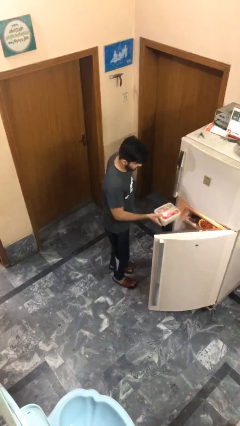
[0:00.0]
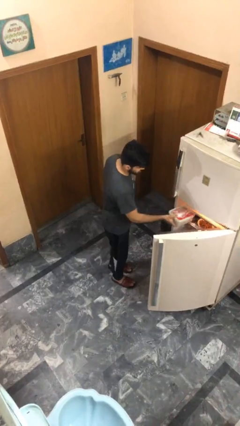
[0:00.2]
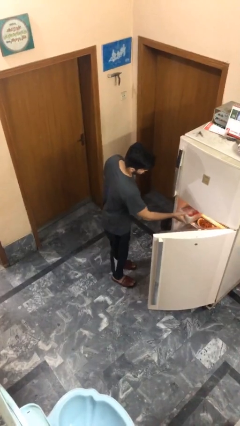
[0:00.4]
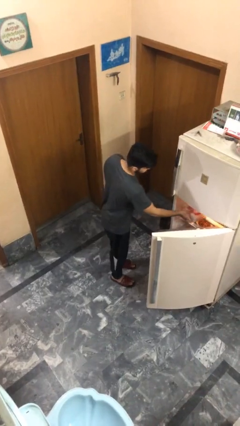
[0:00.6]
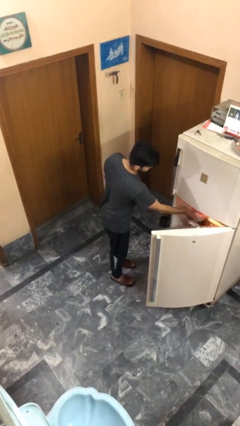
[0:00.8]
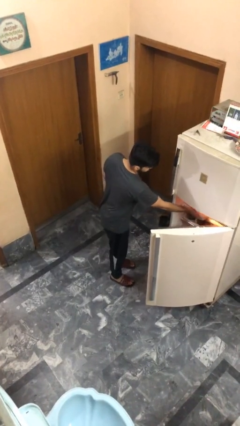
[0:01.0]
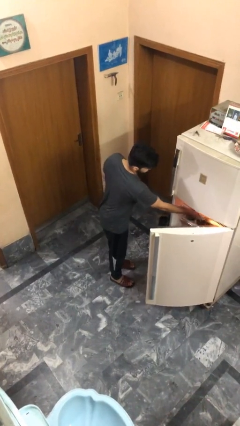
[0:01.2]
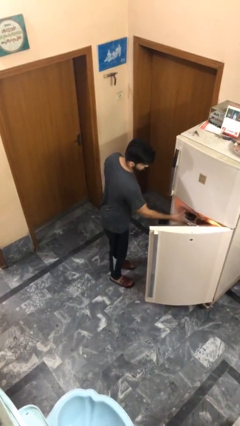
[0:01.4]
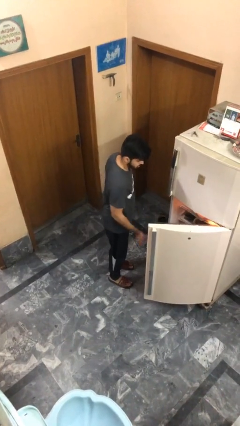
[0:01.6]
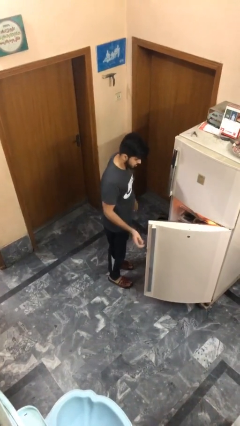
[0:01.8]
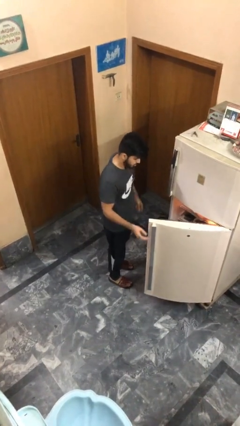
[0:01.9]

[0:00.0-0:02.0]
person puts object into refrigerator

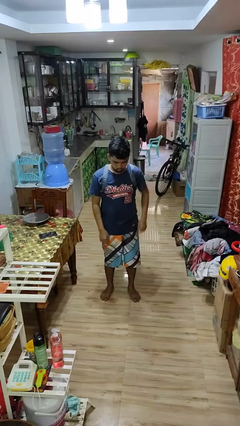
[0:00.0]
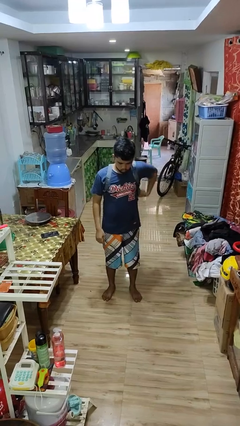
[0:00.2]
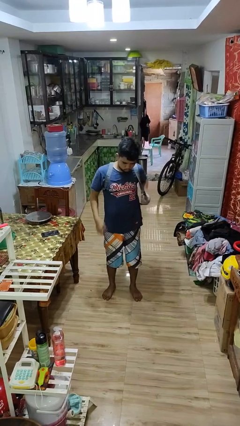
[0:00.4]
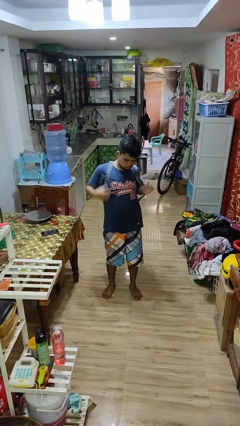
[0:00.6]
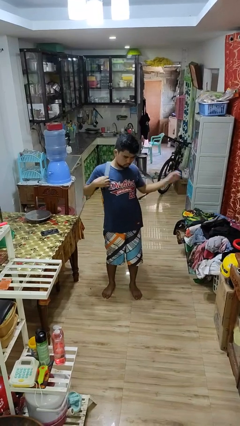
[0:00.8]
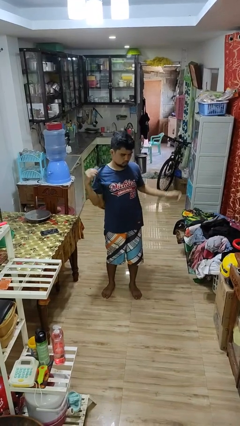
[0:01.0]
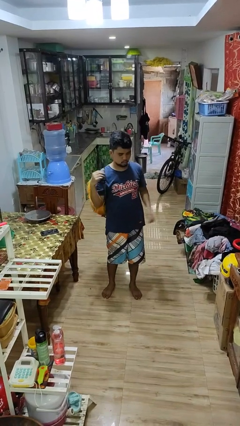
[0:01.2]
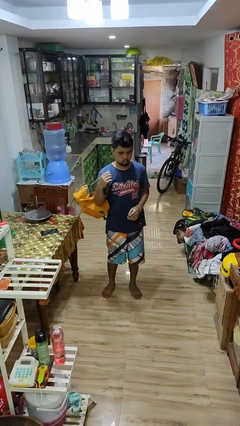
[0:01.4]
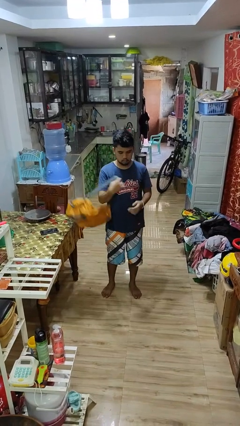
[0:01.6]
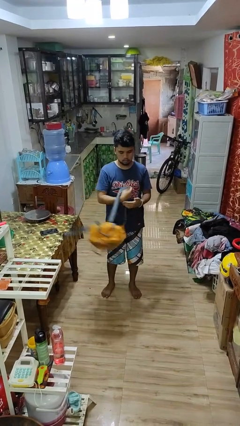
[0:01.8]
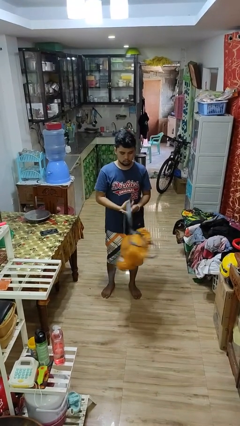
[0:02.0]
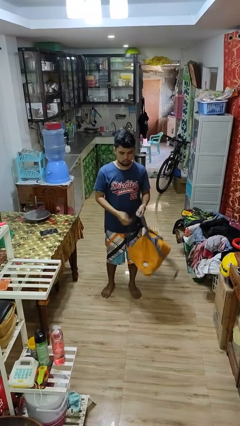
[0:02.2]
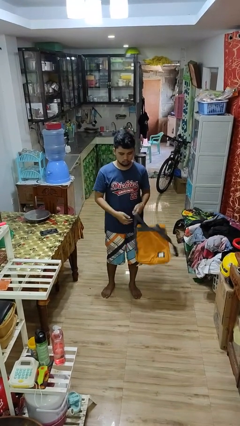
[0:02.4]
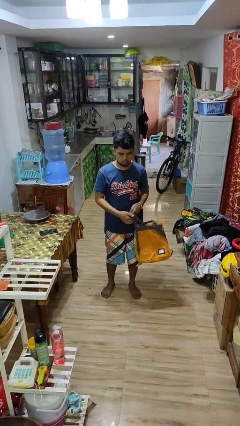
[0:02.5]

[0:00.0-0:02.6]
person takes off backpack

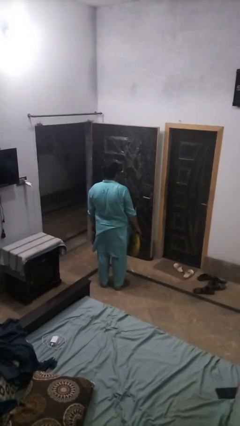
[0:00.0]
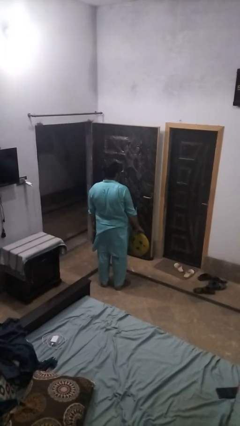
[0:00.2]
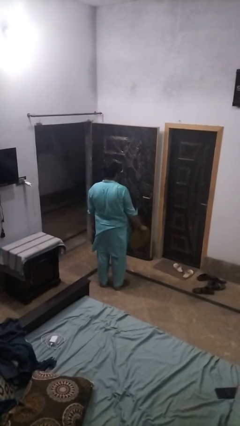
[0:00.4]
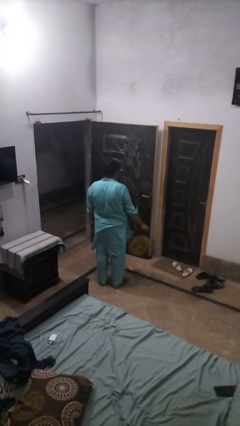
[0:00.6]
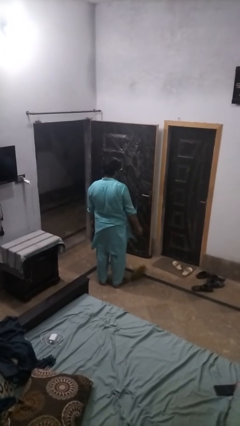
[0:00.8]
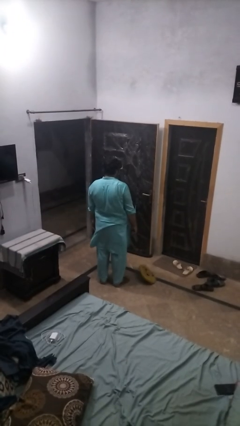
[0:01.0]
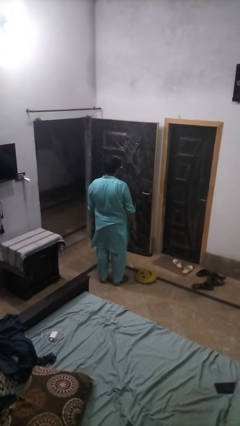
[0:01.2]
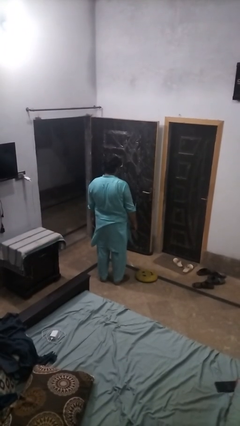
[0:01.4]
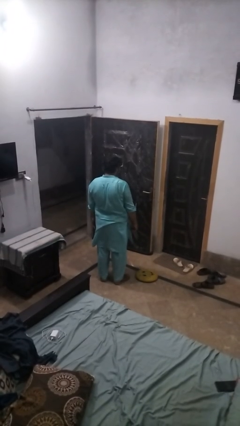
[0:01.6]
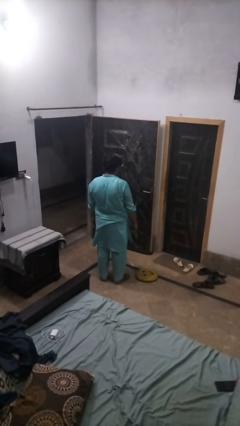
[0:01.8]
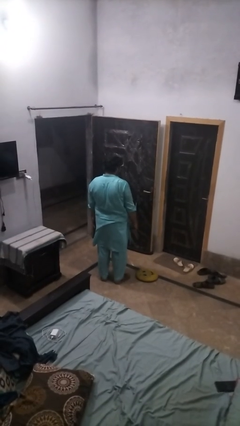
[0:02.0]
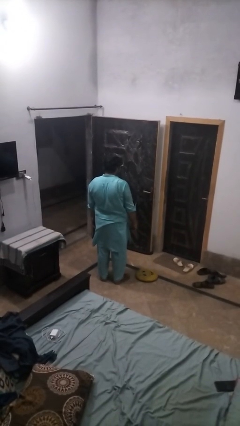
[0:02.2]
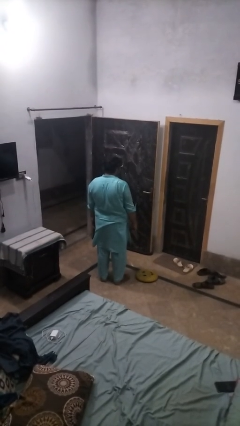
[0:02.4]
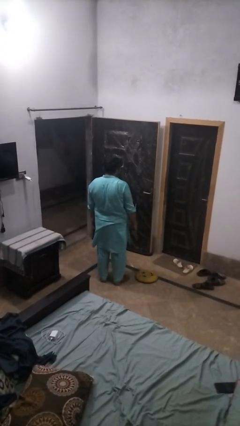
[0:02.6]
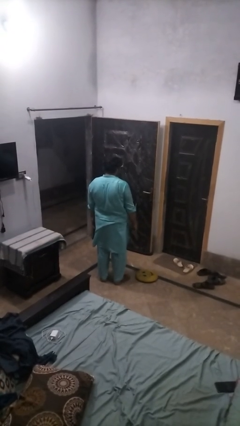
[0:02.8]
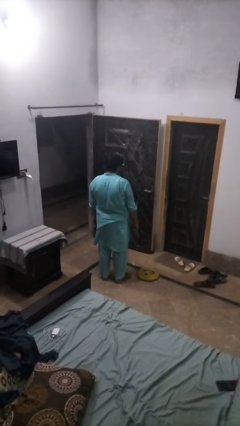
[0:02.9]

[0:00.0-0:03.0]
person throws object to ground

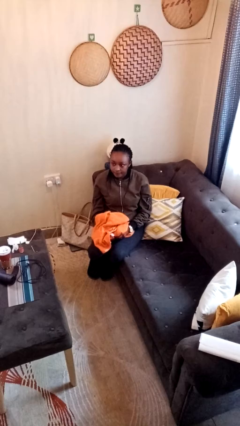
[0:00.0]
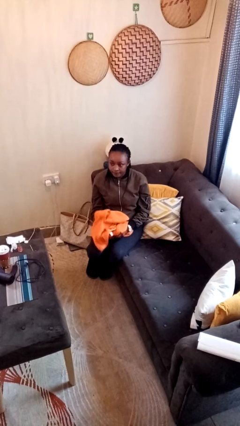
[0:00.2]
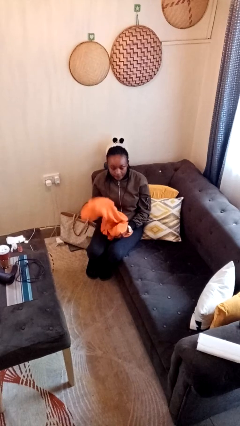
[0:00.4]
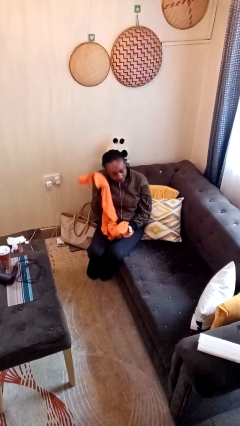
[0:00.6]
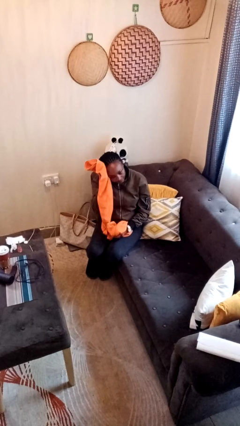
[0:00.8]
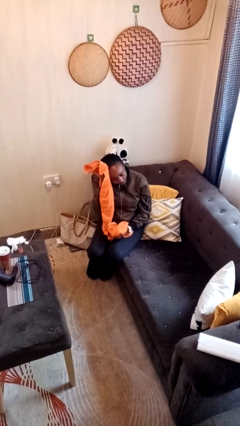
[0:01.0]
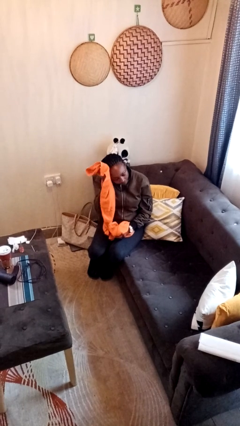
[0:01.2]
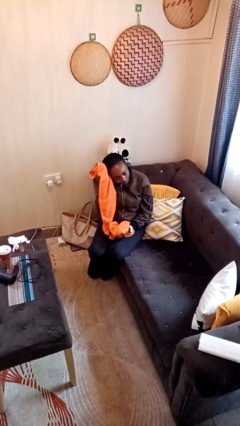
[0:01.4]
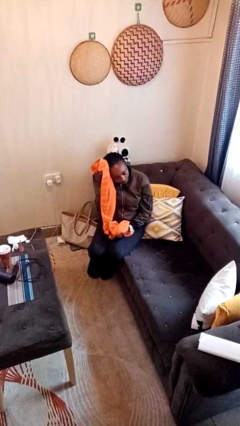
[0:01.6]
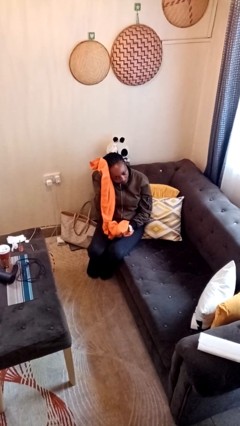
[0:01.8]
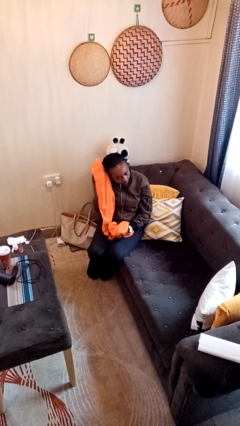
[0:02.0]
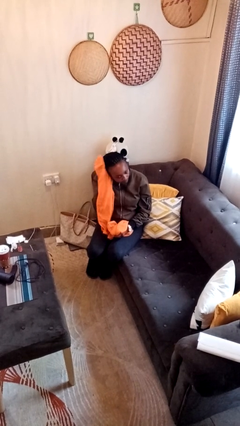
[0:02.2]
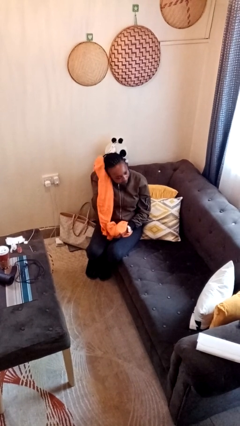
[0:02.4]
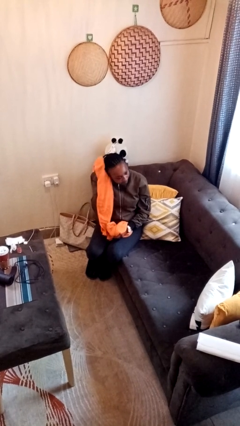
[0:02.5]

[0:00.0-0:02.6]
person dries hair with towel

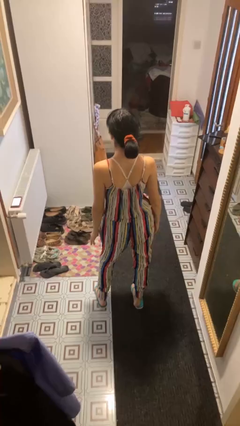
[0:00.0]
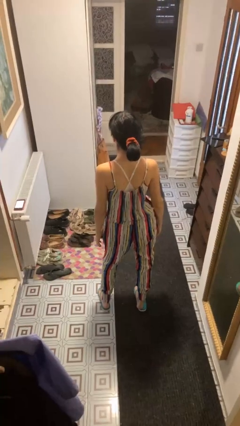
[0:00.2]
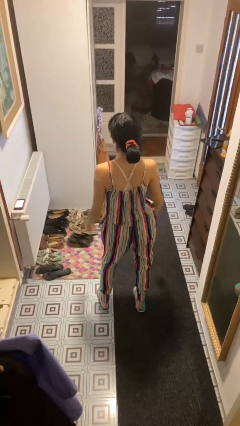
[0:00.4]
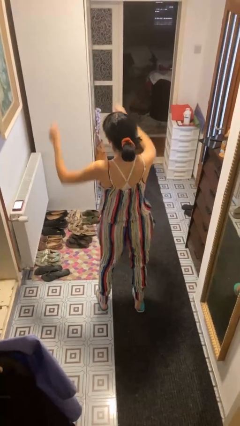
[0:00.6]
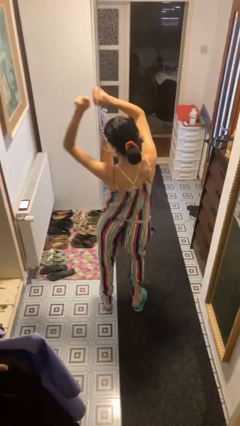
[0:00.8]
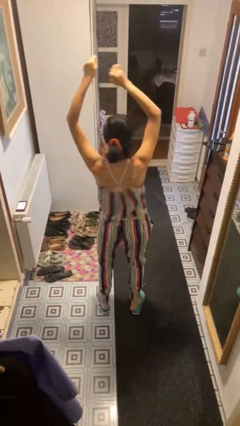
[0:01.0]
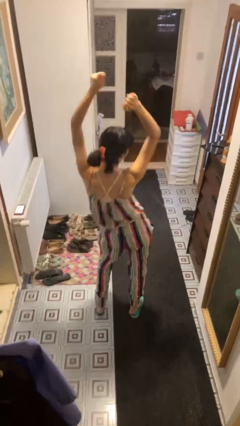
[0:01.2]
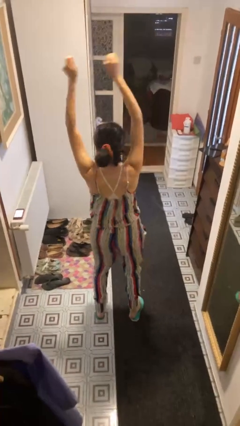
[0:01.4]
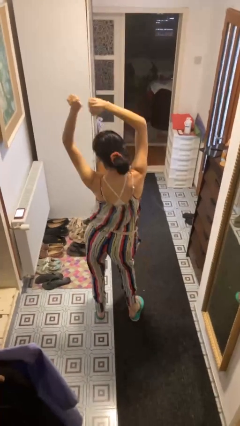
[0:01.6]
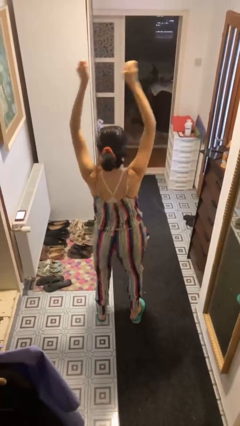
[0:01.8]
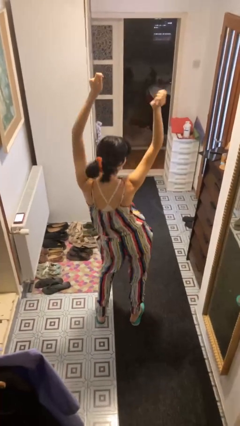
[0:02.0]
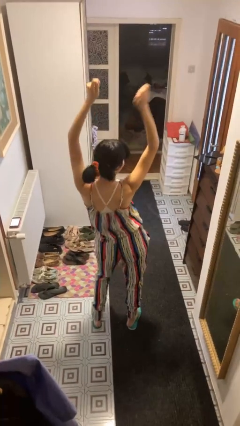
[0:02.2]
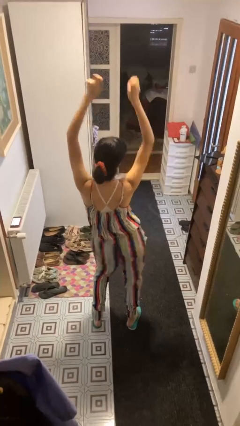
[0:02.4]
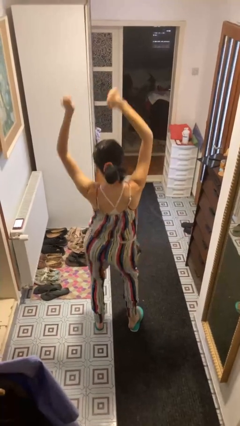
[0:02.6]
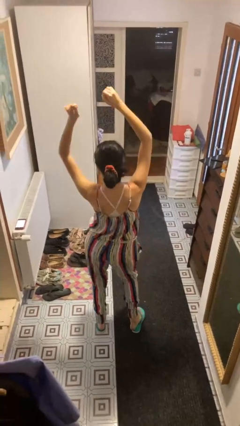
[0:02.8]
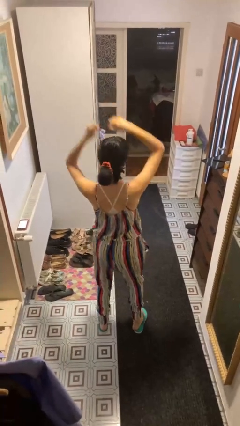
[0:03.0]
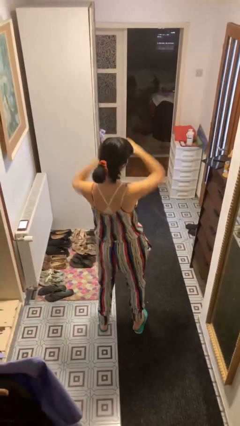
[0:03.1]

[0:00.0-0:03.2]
person dances in place

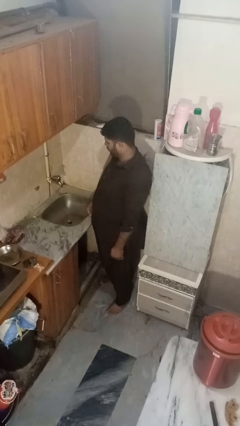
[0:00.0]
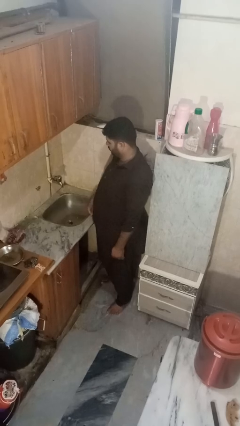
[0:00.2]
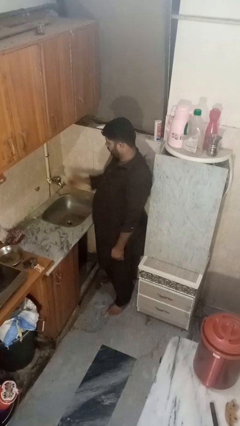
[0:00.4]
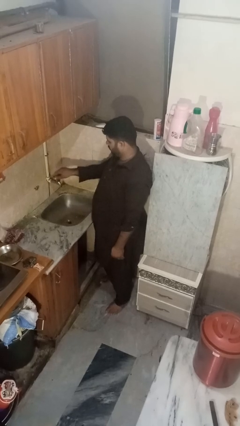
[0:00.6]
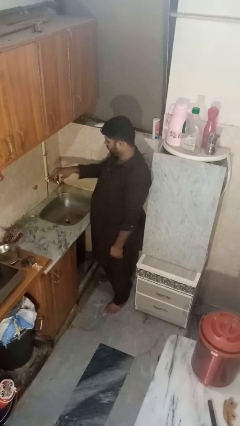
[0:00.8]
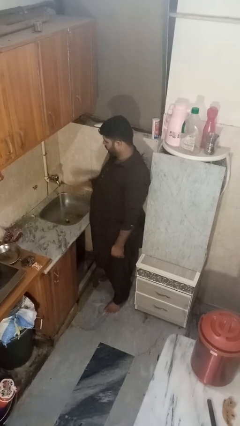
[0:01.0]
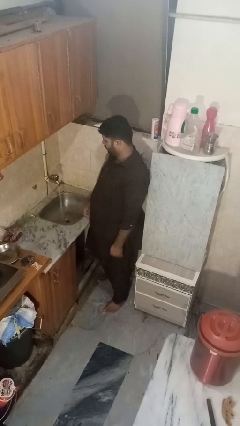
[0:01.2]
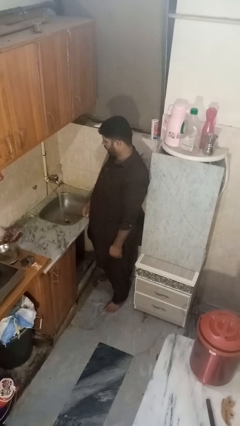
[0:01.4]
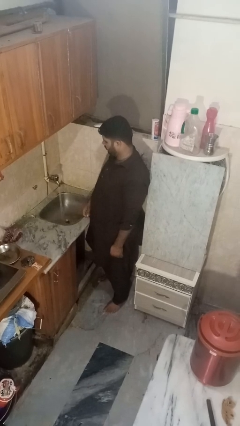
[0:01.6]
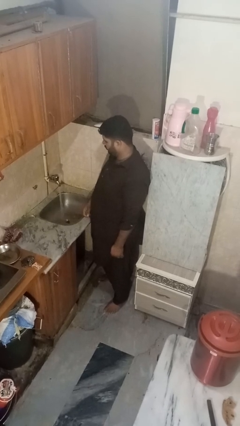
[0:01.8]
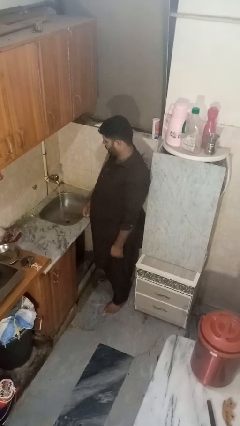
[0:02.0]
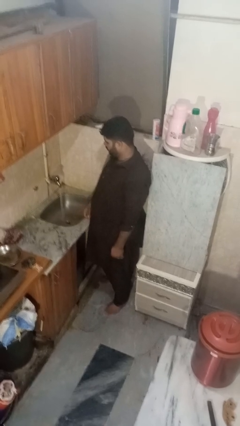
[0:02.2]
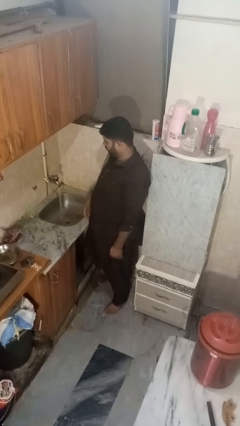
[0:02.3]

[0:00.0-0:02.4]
person turns on faucet

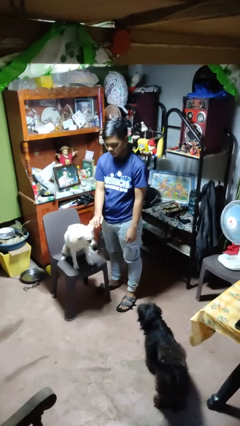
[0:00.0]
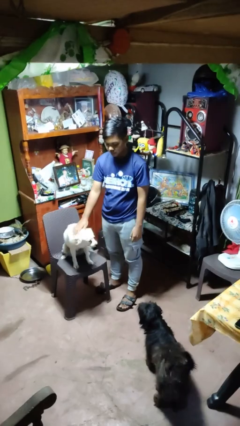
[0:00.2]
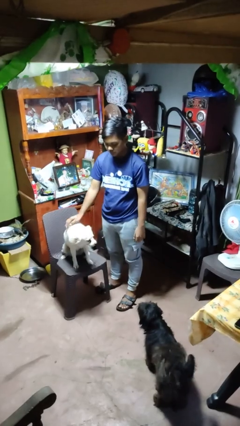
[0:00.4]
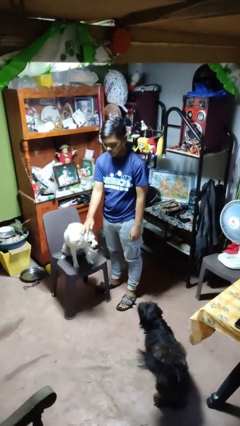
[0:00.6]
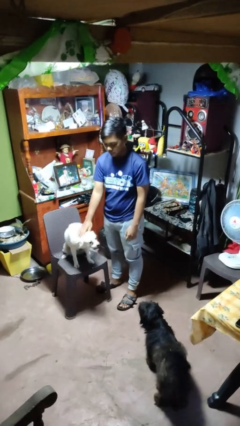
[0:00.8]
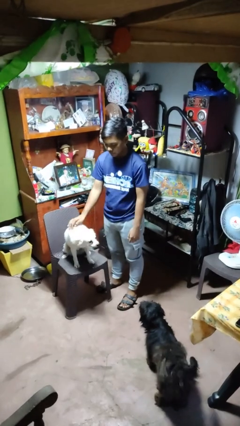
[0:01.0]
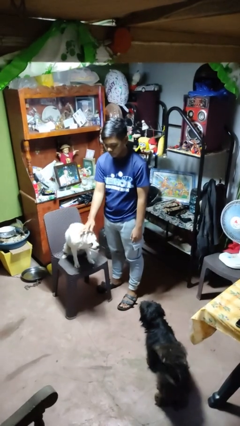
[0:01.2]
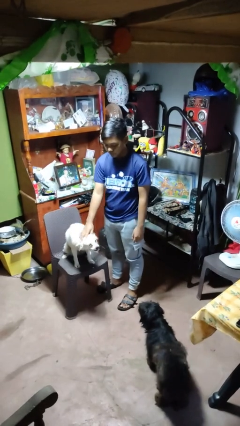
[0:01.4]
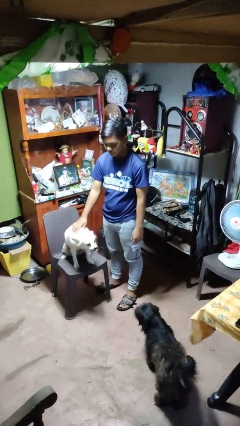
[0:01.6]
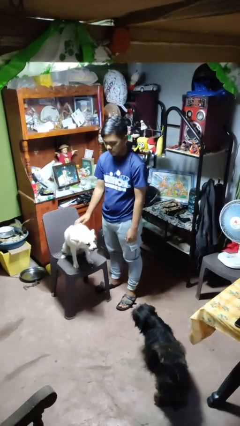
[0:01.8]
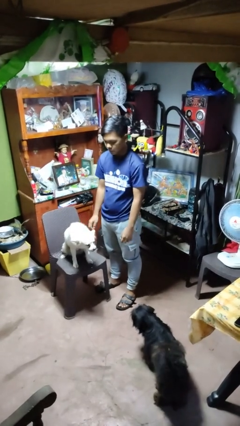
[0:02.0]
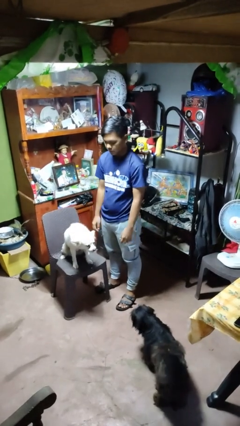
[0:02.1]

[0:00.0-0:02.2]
person pets dog
